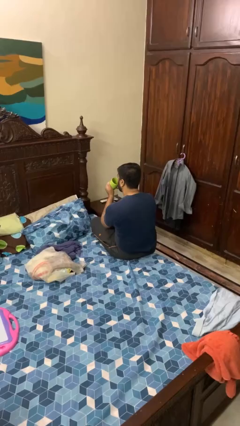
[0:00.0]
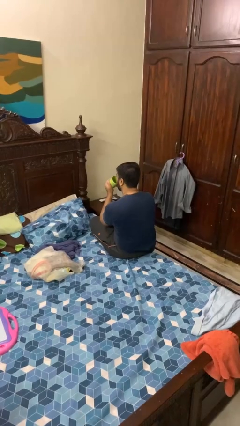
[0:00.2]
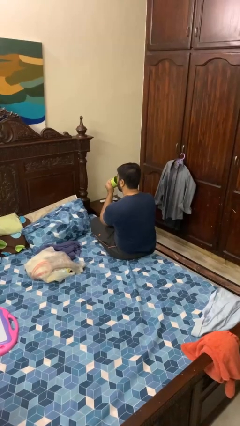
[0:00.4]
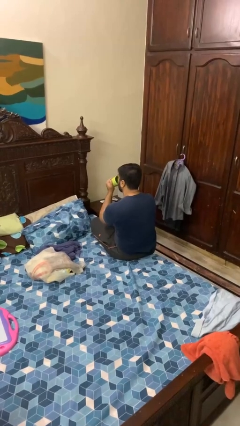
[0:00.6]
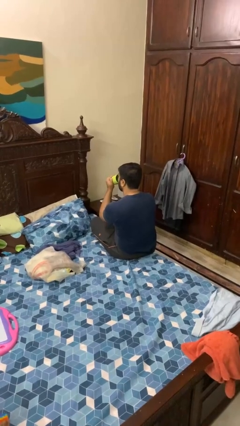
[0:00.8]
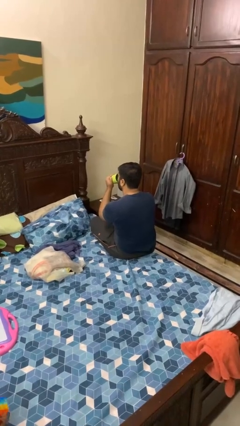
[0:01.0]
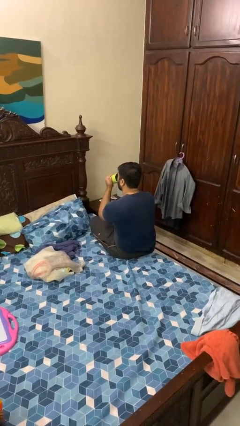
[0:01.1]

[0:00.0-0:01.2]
person drinks from mug

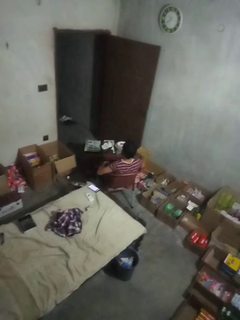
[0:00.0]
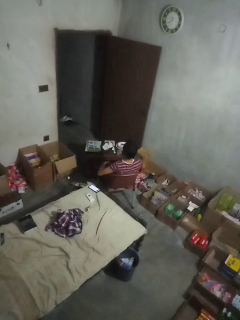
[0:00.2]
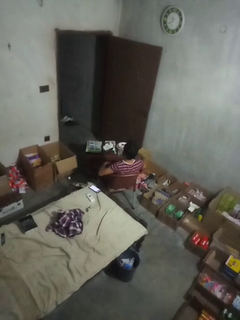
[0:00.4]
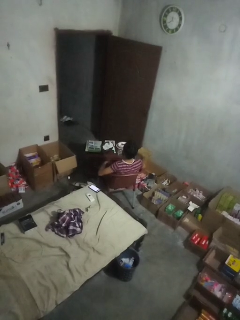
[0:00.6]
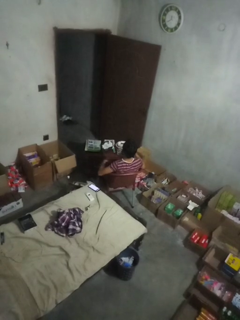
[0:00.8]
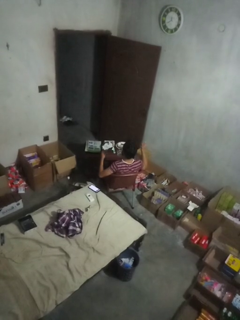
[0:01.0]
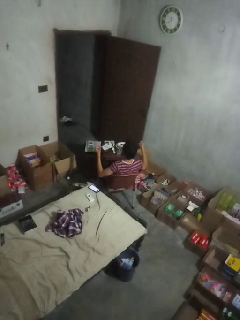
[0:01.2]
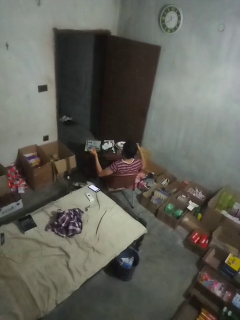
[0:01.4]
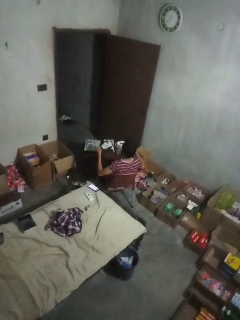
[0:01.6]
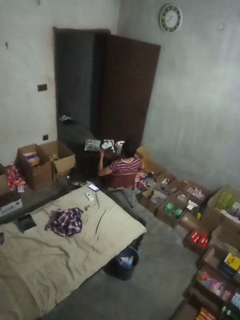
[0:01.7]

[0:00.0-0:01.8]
person snaps fingers

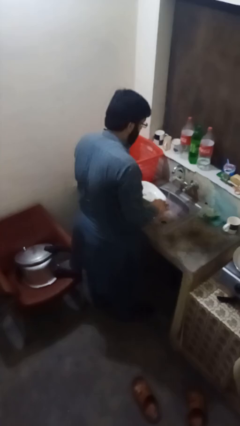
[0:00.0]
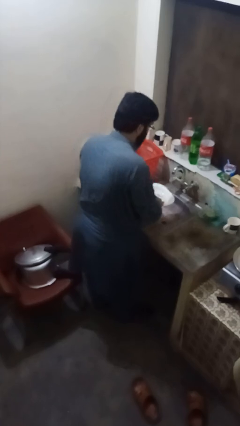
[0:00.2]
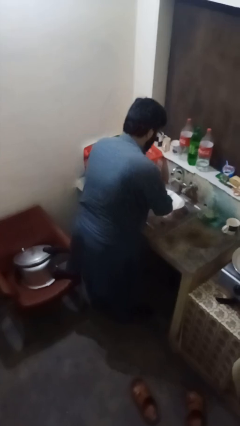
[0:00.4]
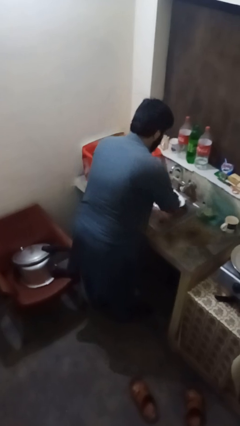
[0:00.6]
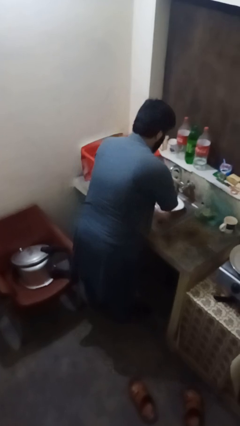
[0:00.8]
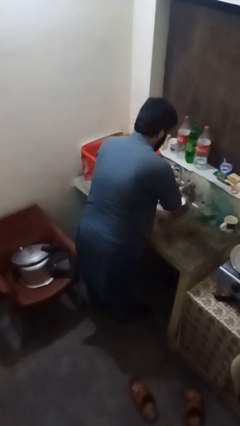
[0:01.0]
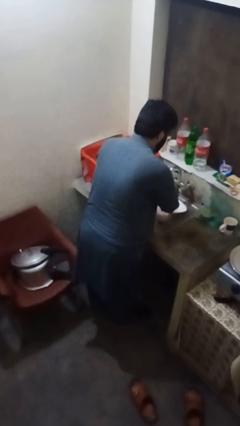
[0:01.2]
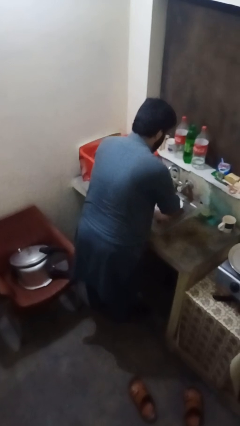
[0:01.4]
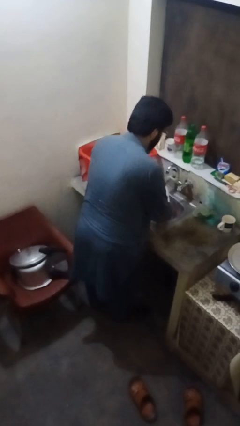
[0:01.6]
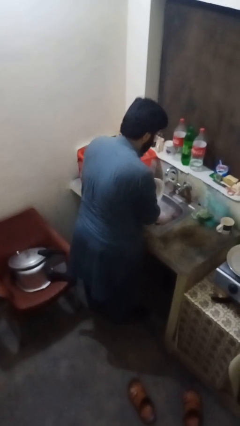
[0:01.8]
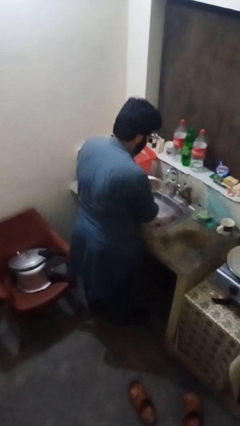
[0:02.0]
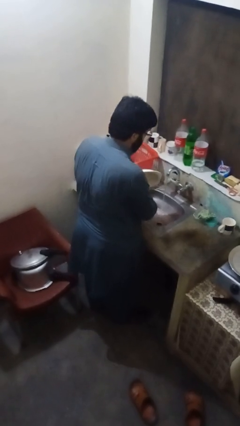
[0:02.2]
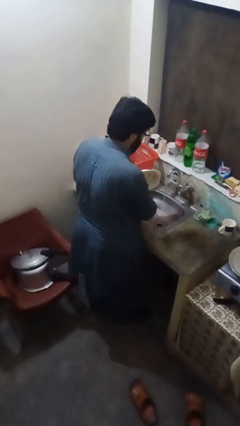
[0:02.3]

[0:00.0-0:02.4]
person washes dish

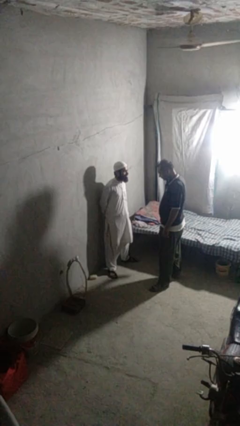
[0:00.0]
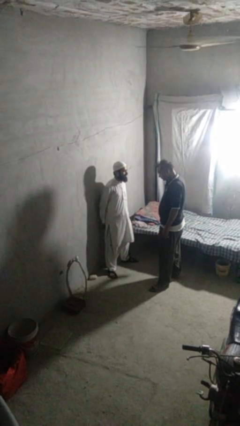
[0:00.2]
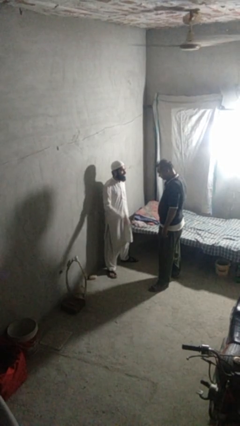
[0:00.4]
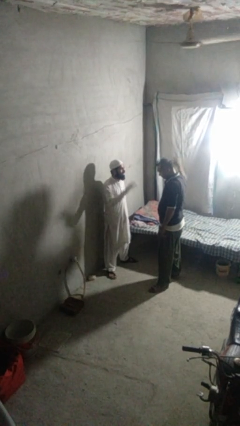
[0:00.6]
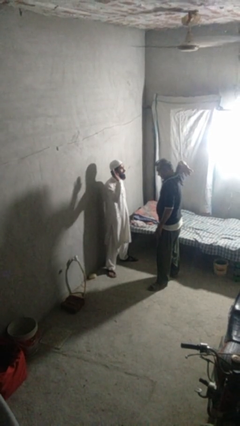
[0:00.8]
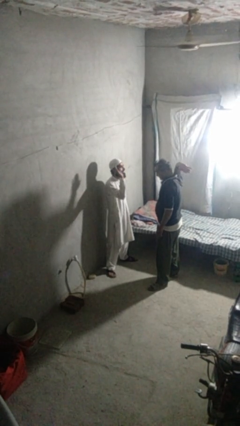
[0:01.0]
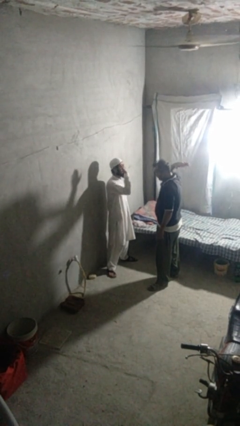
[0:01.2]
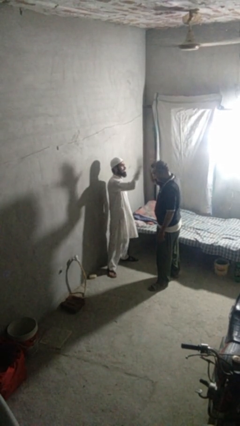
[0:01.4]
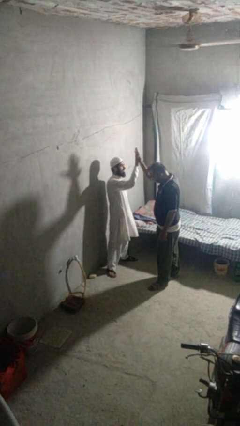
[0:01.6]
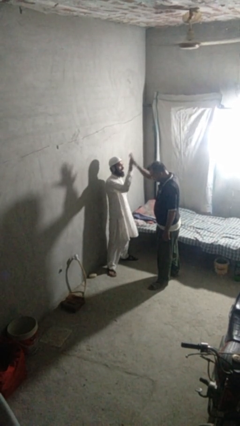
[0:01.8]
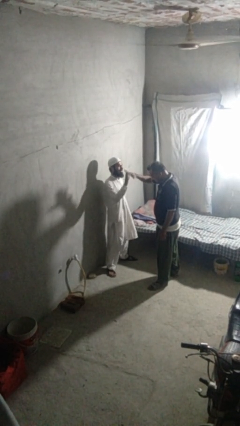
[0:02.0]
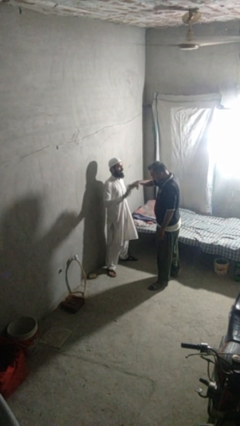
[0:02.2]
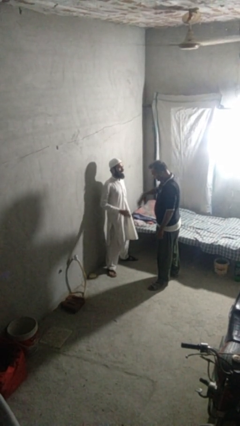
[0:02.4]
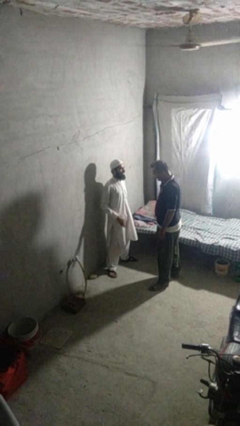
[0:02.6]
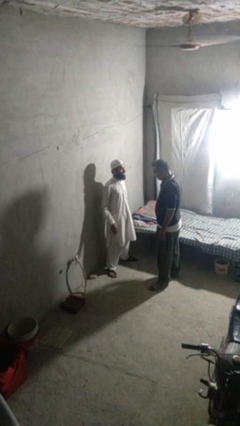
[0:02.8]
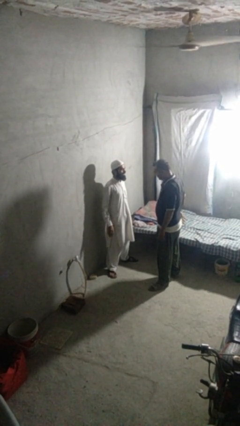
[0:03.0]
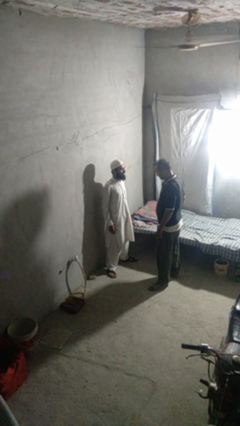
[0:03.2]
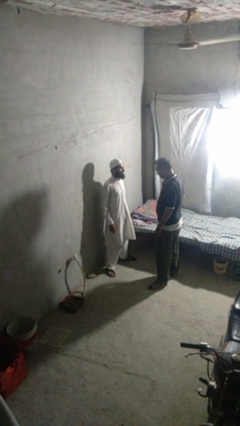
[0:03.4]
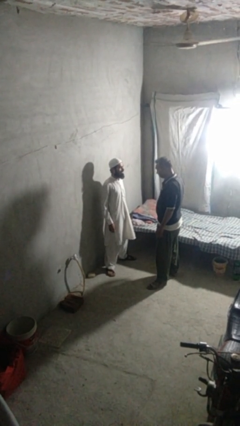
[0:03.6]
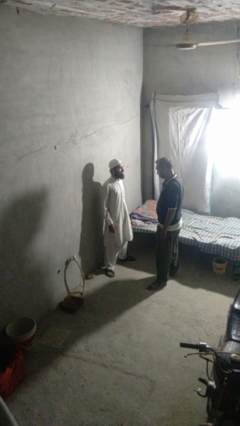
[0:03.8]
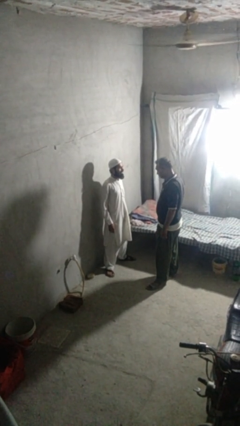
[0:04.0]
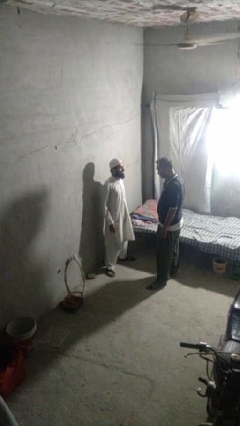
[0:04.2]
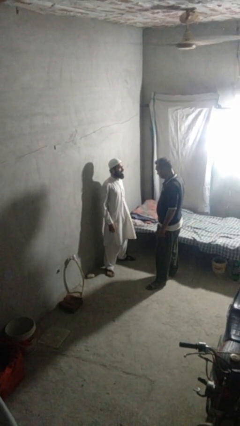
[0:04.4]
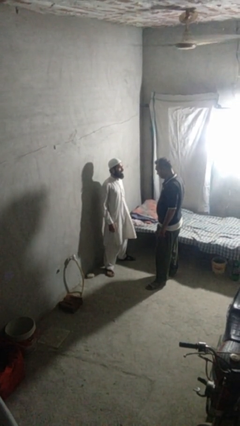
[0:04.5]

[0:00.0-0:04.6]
person highfives hand

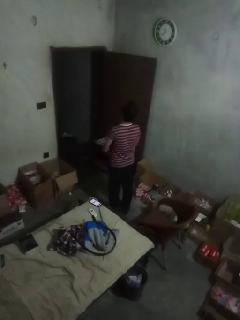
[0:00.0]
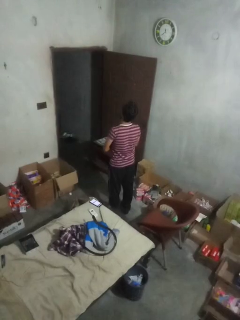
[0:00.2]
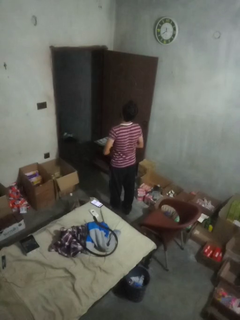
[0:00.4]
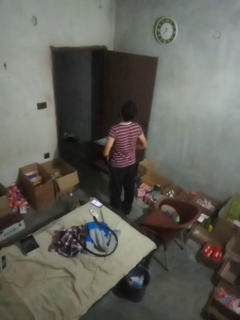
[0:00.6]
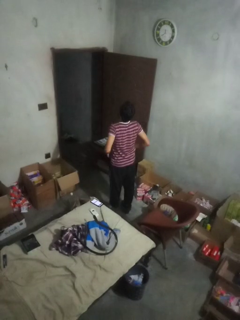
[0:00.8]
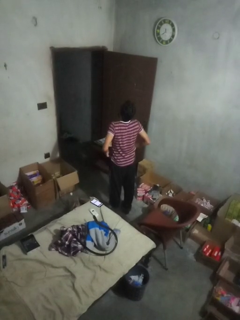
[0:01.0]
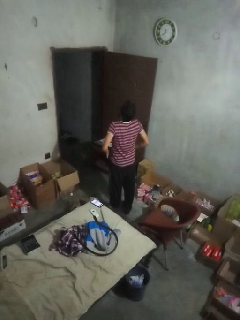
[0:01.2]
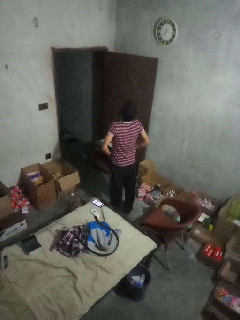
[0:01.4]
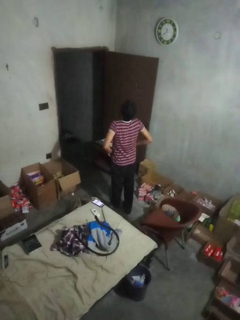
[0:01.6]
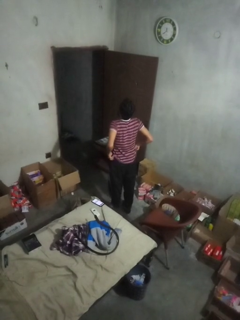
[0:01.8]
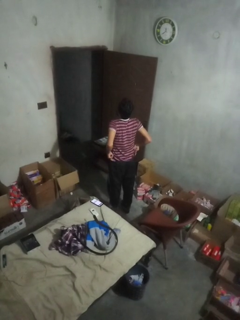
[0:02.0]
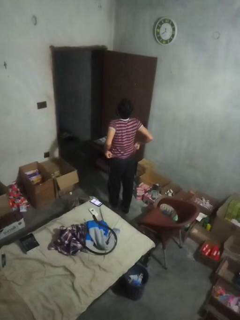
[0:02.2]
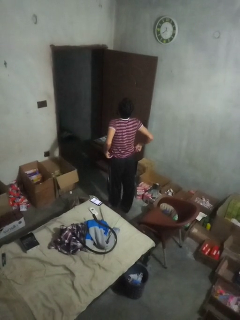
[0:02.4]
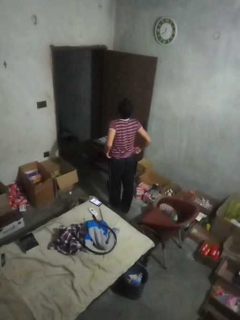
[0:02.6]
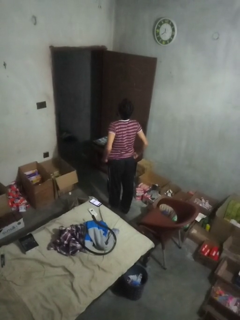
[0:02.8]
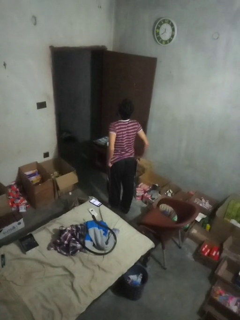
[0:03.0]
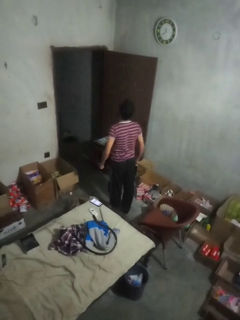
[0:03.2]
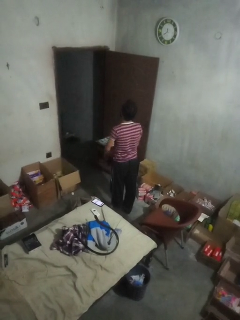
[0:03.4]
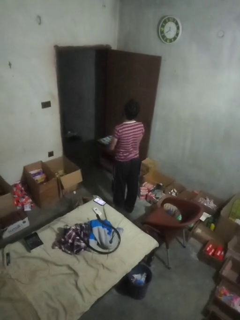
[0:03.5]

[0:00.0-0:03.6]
person hikes up pants

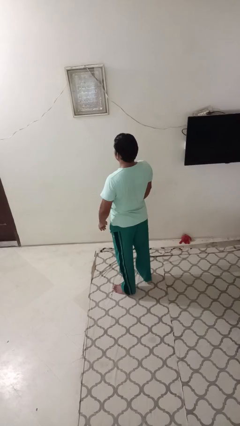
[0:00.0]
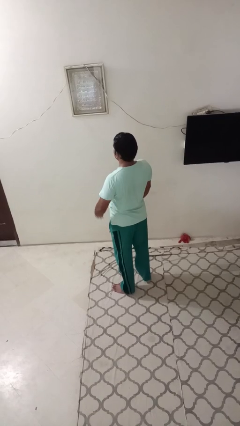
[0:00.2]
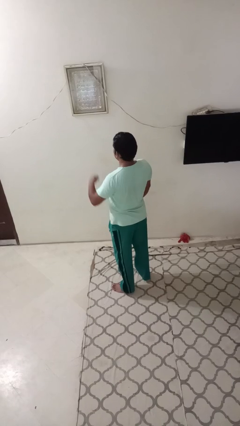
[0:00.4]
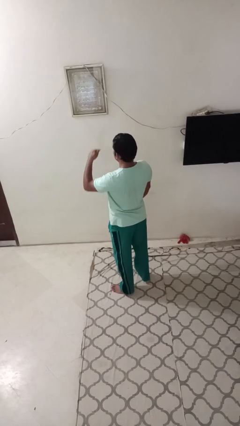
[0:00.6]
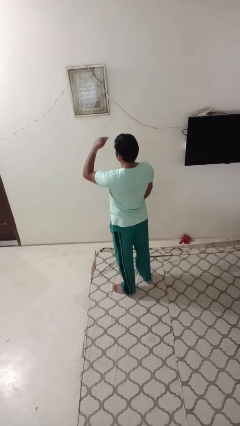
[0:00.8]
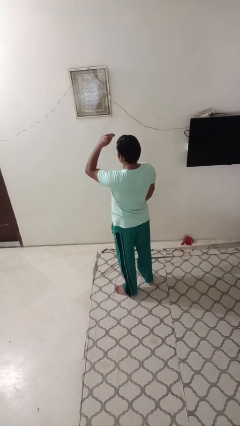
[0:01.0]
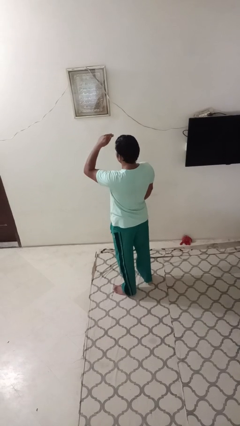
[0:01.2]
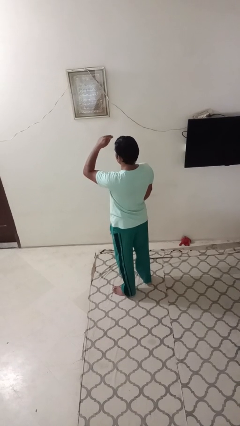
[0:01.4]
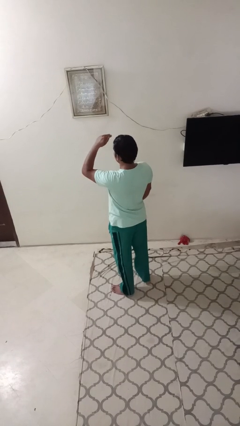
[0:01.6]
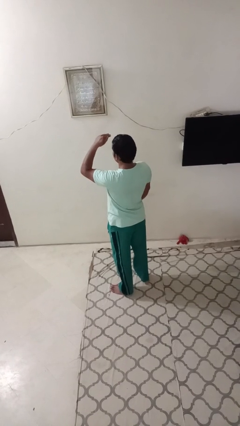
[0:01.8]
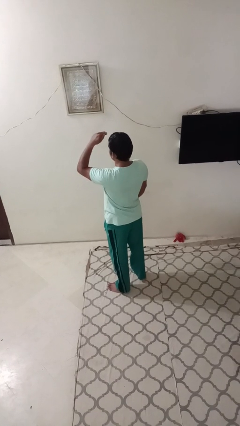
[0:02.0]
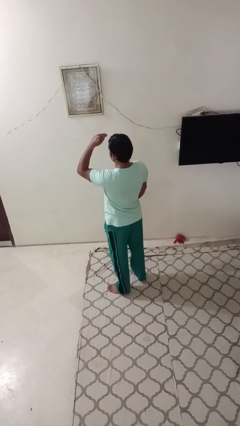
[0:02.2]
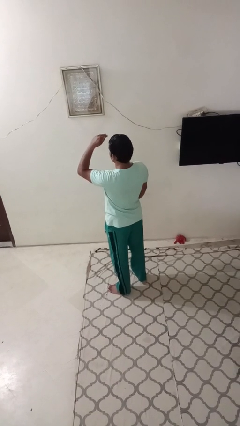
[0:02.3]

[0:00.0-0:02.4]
person gestures swipe up

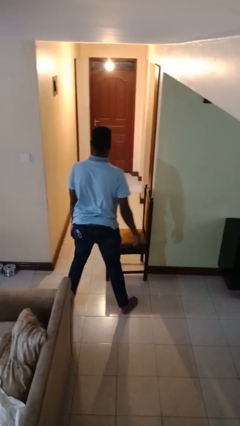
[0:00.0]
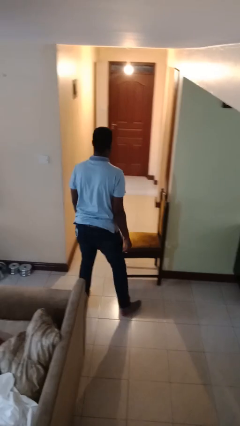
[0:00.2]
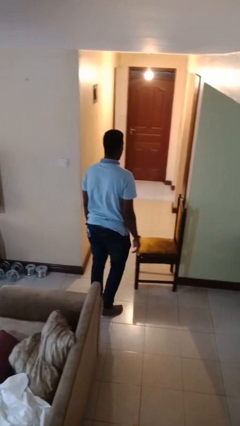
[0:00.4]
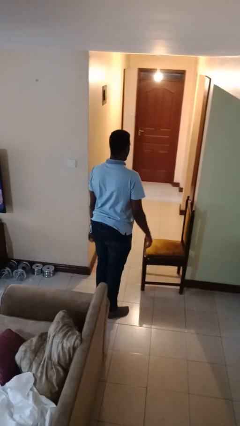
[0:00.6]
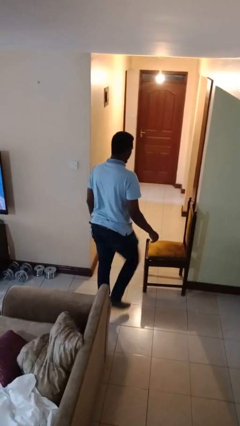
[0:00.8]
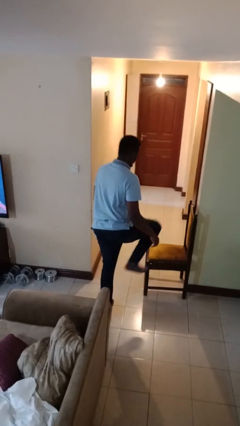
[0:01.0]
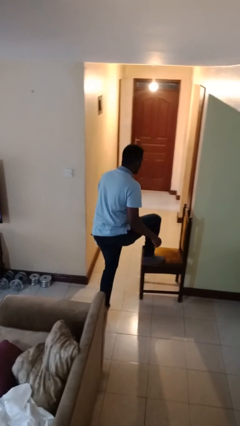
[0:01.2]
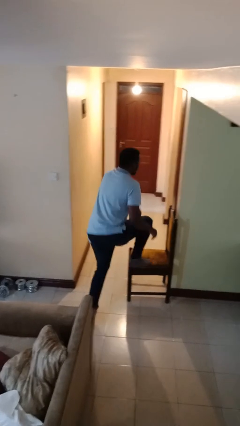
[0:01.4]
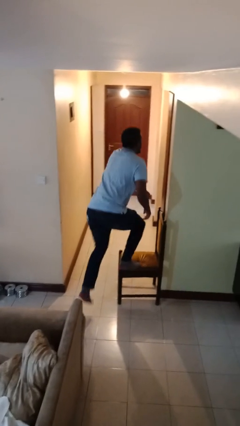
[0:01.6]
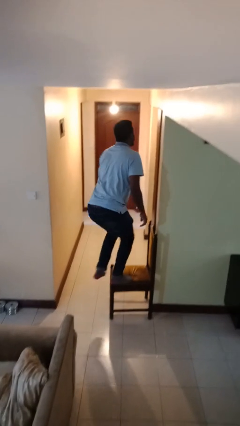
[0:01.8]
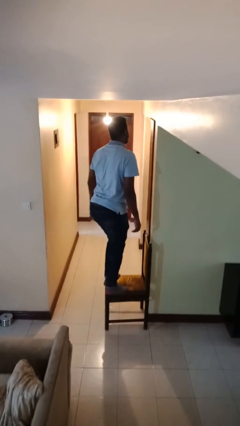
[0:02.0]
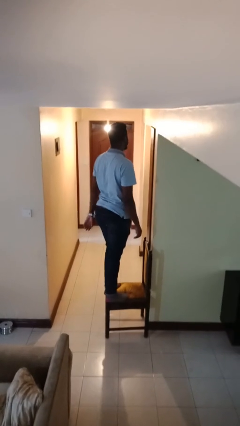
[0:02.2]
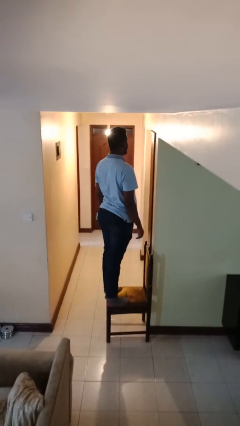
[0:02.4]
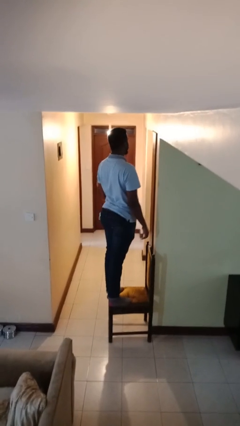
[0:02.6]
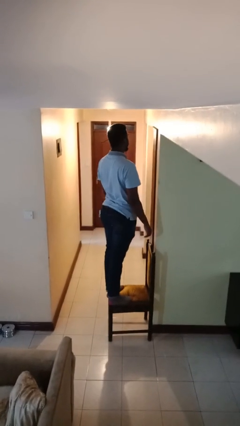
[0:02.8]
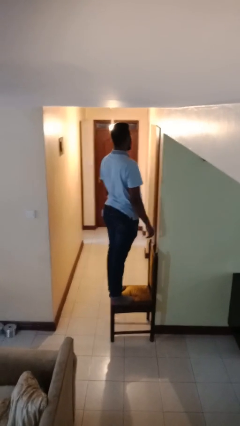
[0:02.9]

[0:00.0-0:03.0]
person climbs on chair
